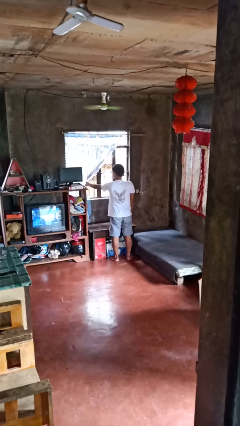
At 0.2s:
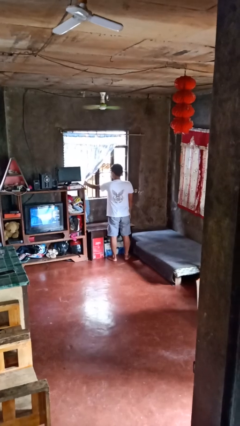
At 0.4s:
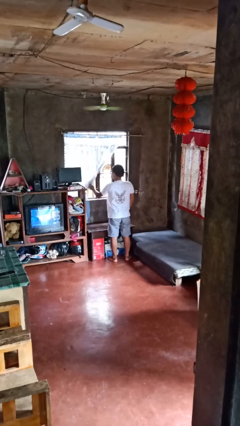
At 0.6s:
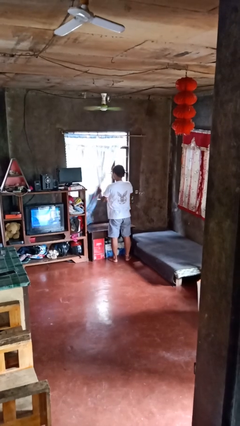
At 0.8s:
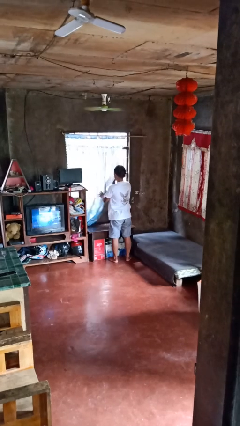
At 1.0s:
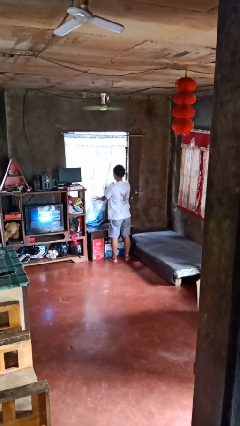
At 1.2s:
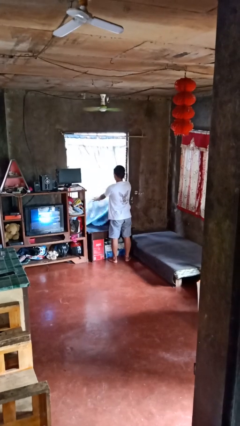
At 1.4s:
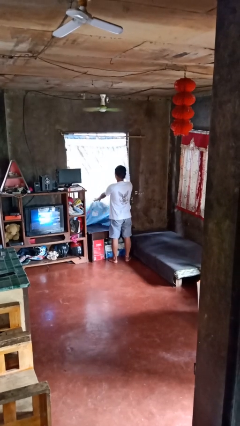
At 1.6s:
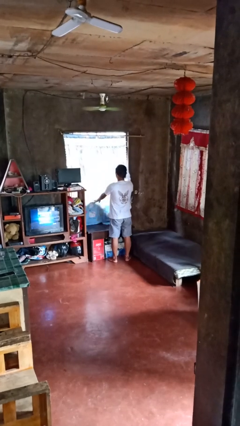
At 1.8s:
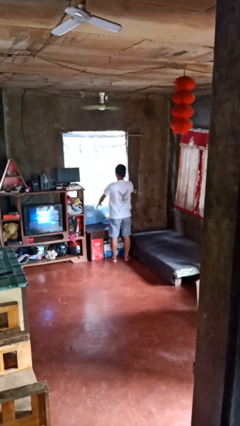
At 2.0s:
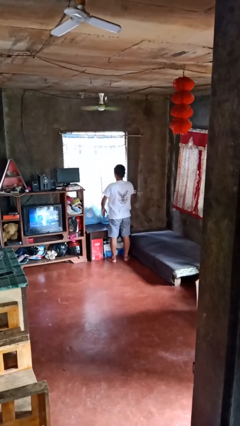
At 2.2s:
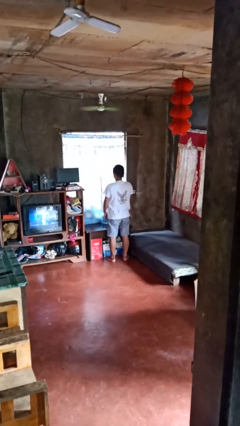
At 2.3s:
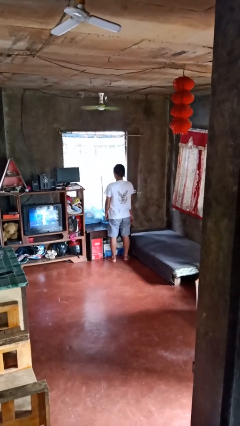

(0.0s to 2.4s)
person closes curtains

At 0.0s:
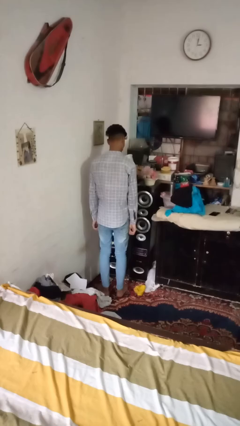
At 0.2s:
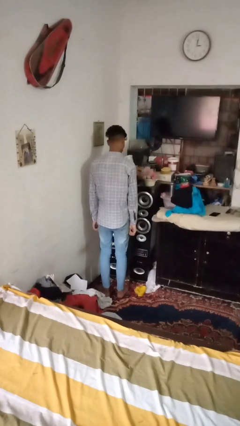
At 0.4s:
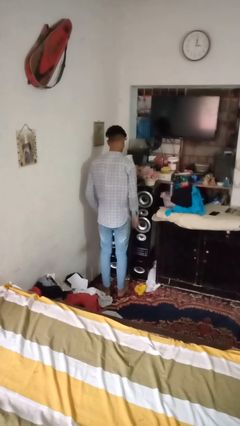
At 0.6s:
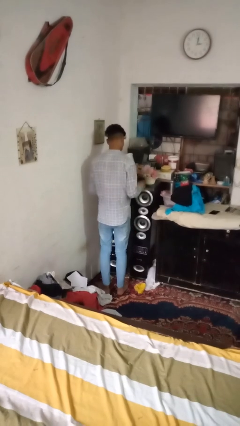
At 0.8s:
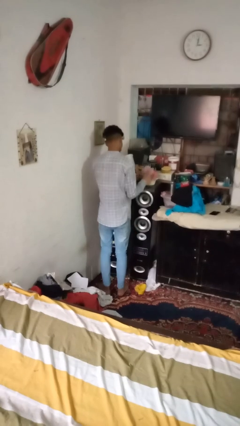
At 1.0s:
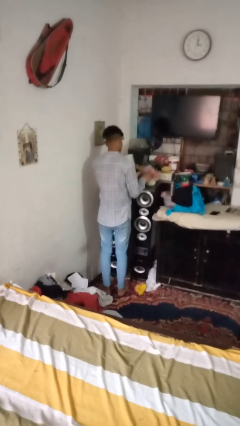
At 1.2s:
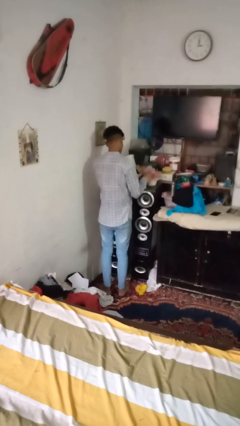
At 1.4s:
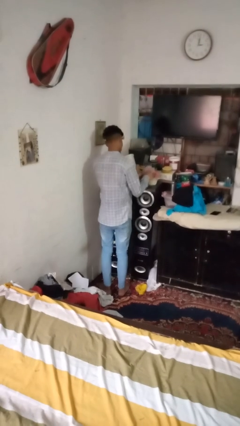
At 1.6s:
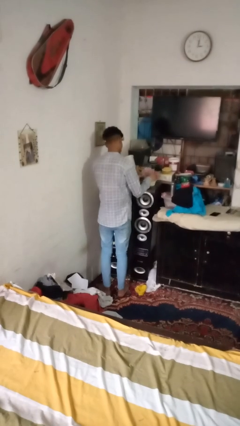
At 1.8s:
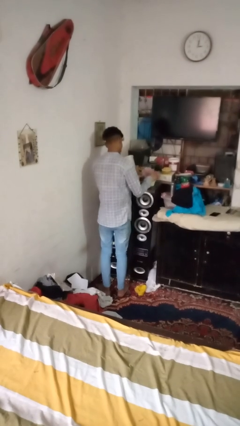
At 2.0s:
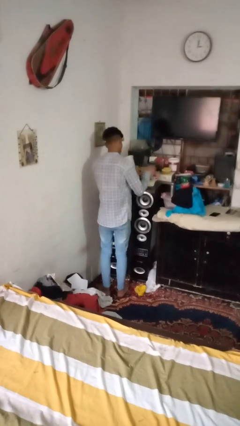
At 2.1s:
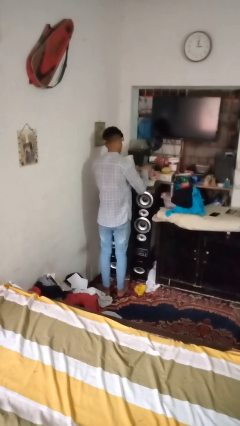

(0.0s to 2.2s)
person arranges flowers in vase

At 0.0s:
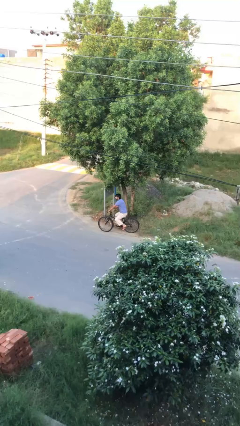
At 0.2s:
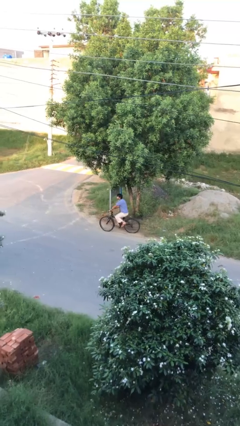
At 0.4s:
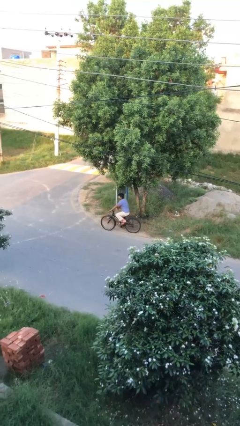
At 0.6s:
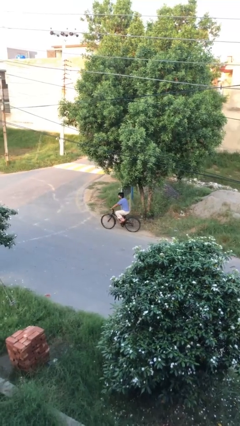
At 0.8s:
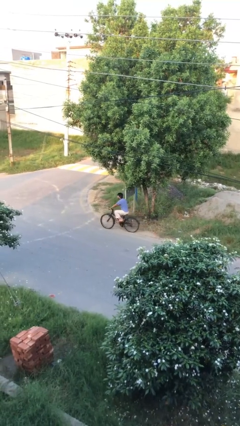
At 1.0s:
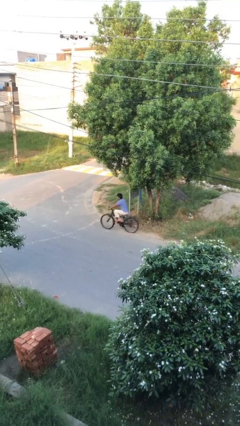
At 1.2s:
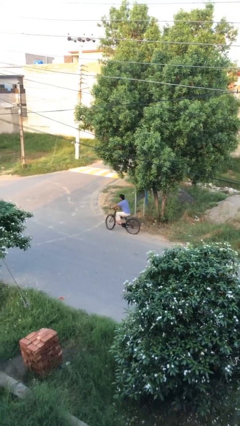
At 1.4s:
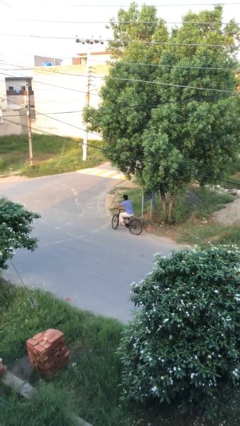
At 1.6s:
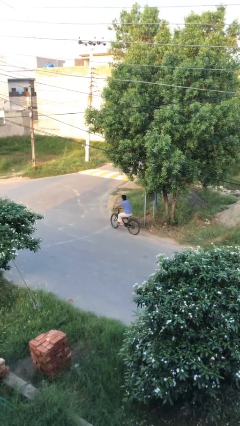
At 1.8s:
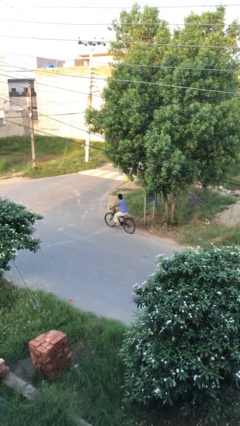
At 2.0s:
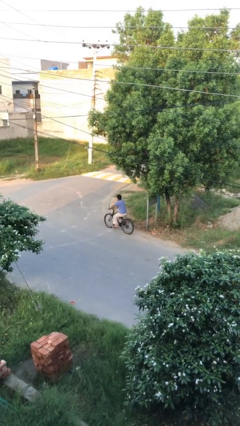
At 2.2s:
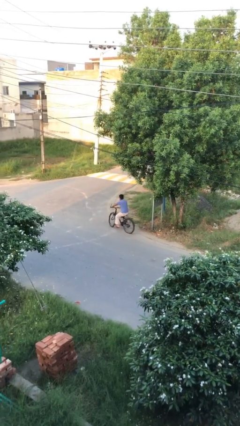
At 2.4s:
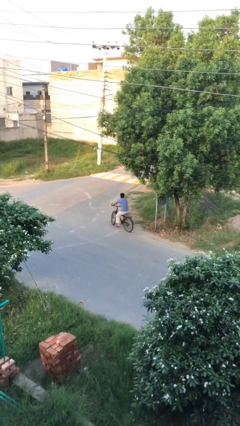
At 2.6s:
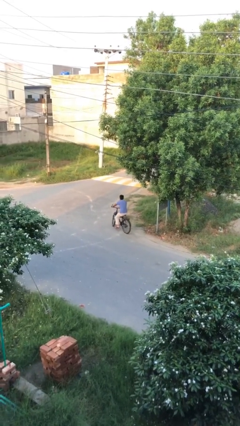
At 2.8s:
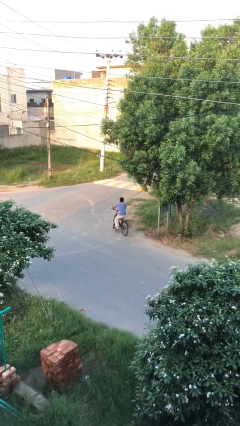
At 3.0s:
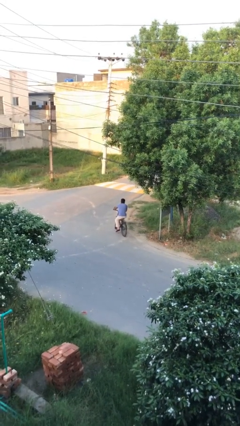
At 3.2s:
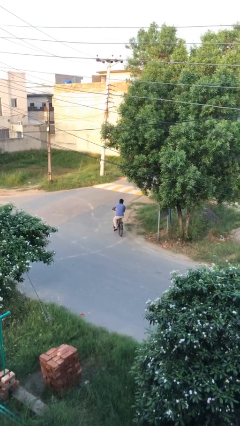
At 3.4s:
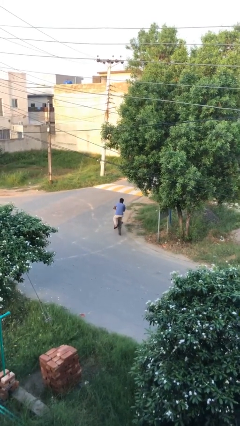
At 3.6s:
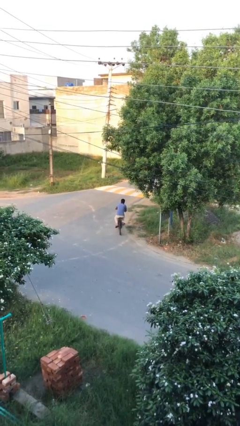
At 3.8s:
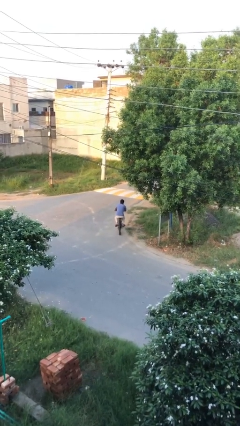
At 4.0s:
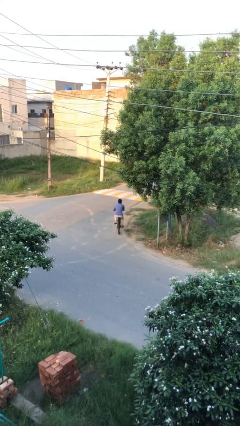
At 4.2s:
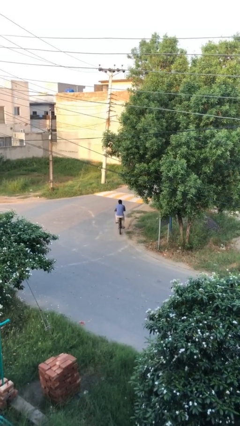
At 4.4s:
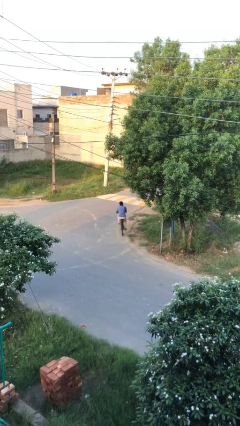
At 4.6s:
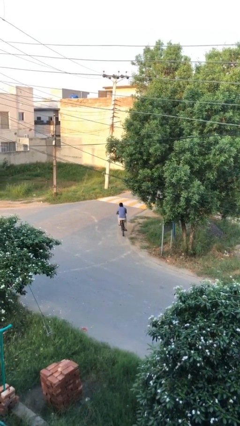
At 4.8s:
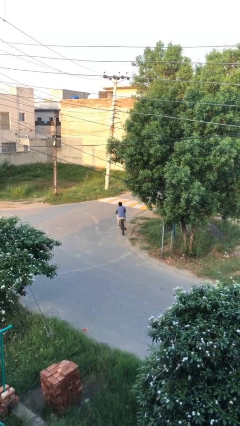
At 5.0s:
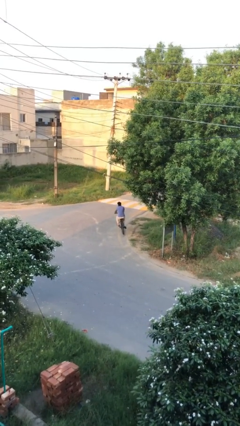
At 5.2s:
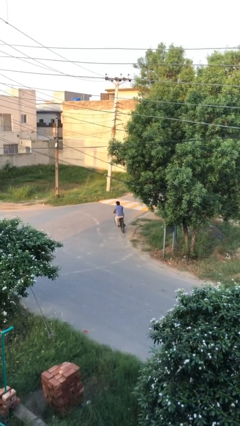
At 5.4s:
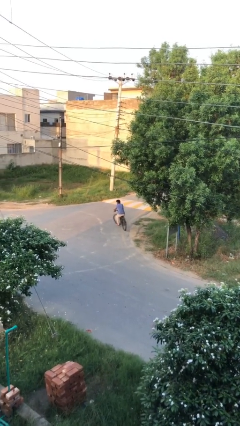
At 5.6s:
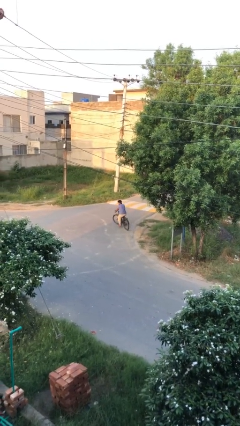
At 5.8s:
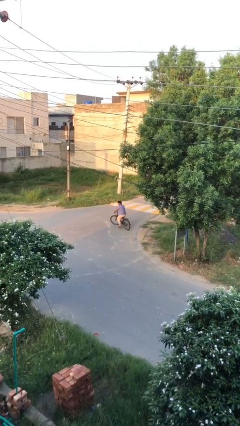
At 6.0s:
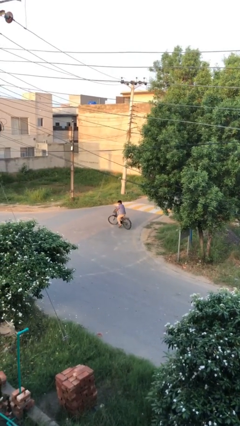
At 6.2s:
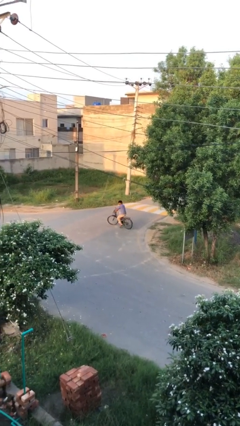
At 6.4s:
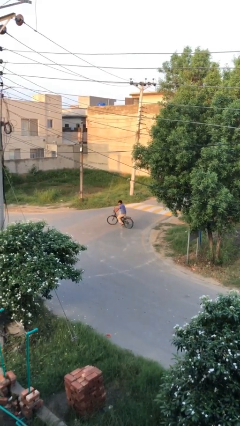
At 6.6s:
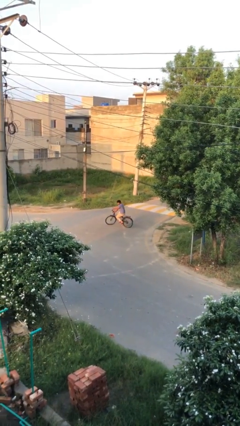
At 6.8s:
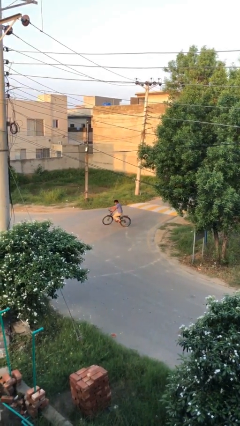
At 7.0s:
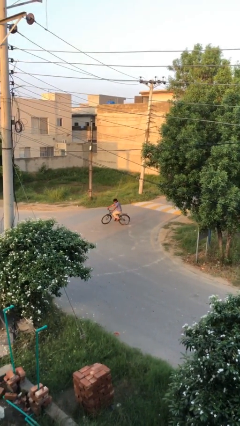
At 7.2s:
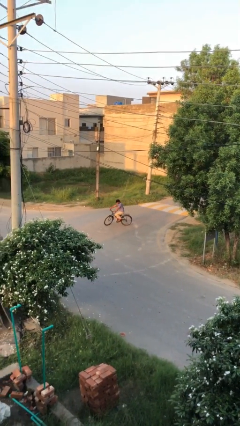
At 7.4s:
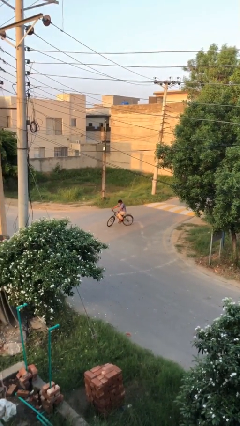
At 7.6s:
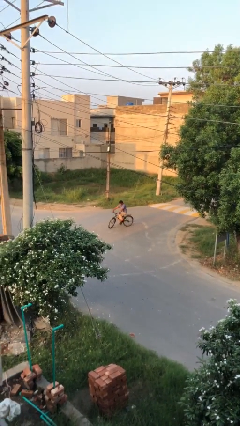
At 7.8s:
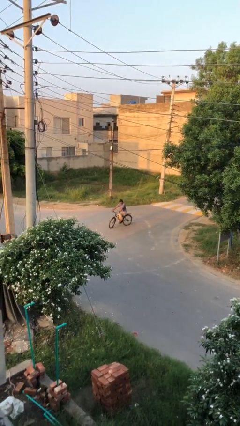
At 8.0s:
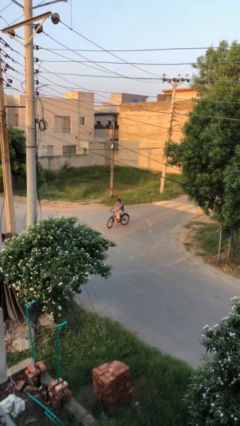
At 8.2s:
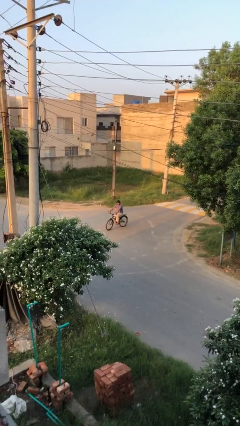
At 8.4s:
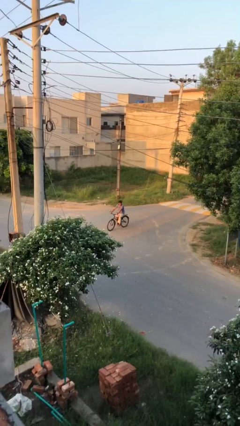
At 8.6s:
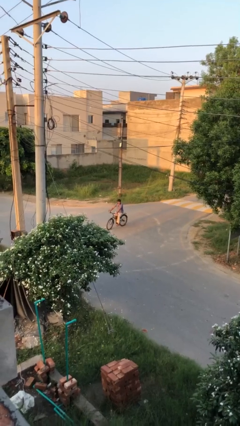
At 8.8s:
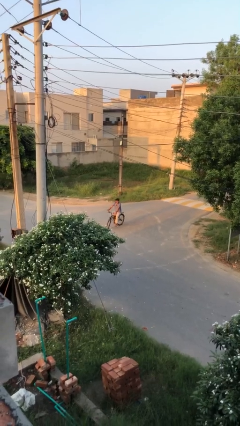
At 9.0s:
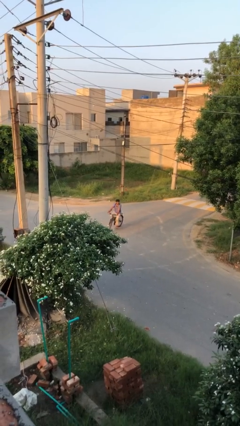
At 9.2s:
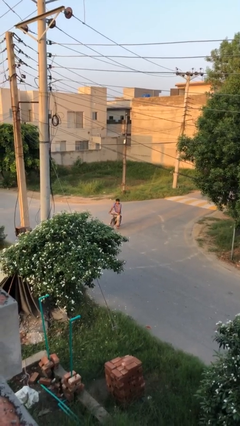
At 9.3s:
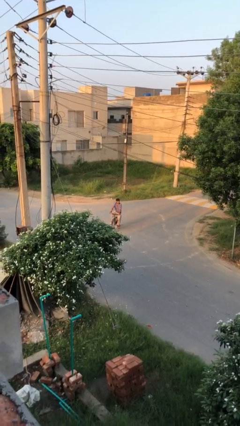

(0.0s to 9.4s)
person rides bicycle

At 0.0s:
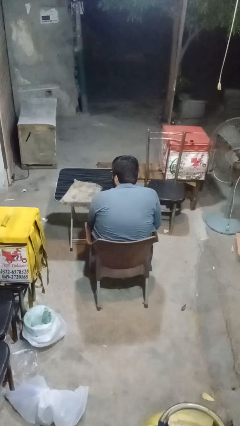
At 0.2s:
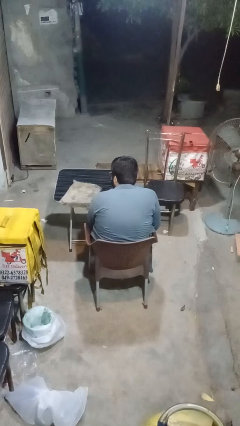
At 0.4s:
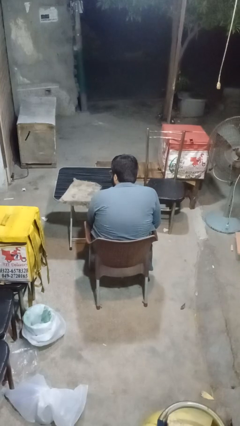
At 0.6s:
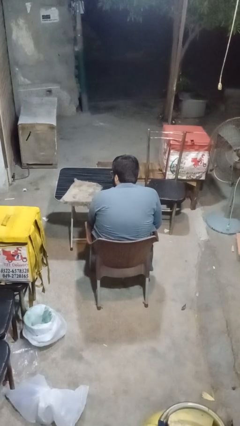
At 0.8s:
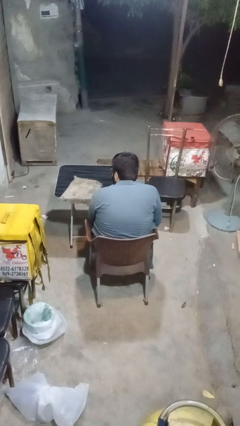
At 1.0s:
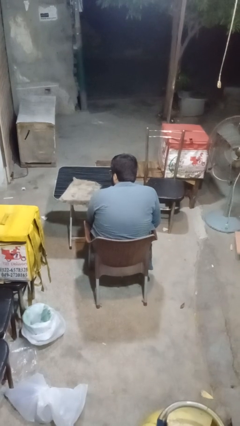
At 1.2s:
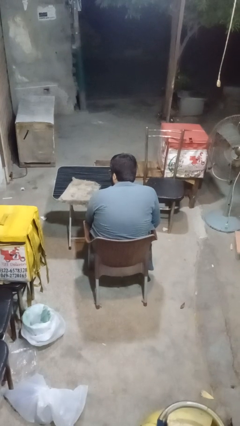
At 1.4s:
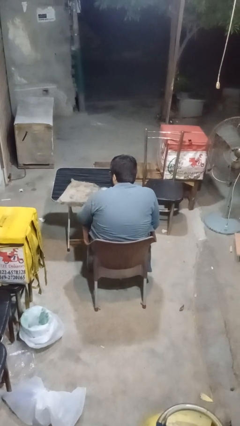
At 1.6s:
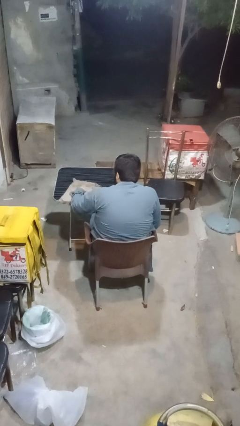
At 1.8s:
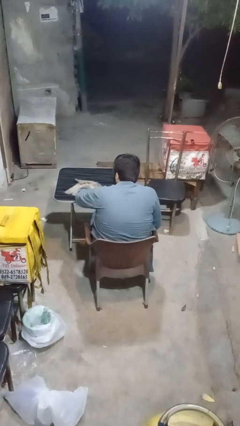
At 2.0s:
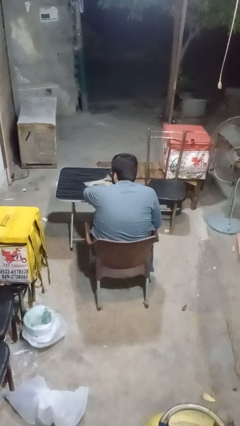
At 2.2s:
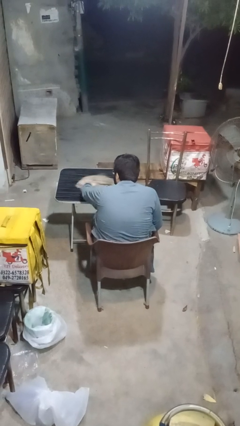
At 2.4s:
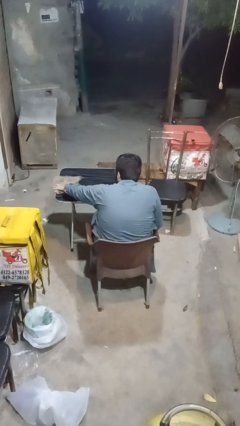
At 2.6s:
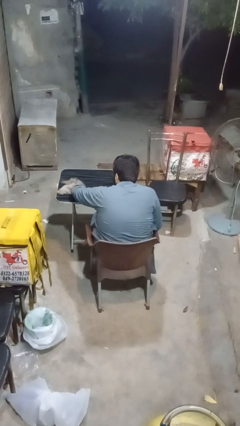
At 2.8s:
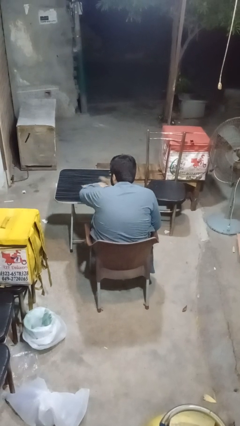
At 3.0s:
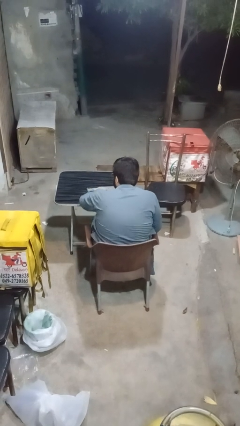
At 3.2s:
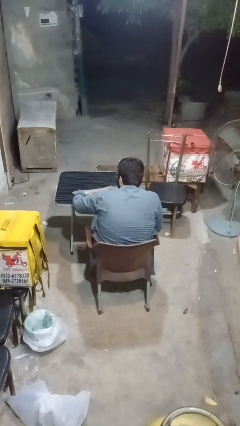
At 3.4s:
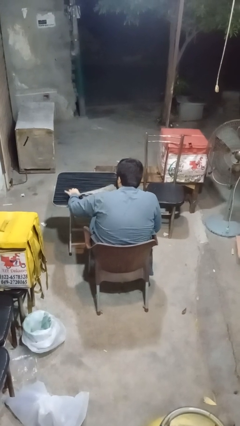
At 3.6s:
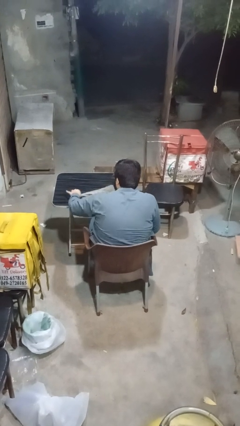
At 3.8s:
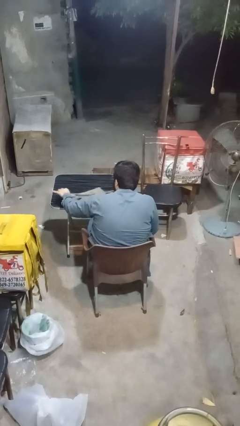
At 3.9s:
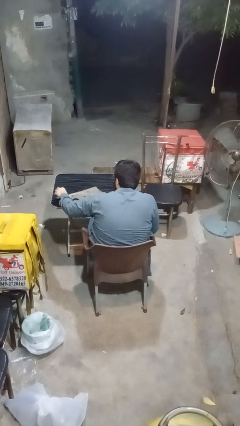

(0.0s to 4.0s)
person cleans table with rag
